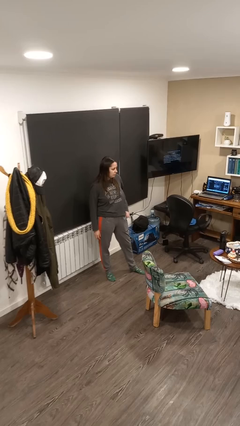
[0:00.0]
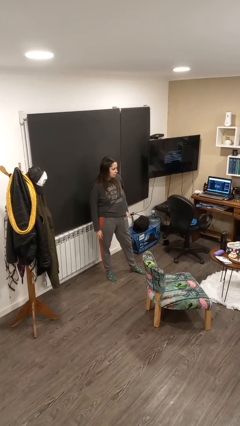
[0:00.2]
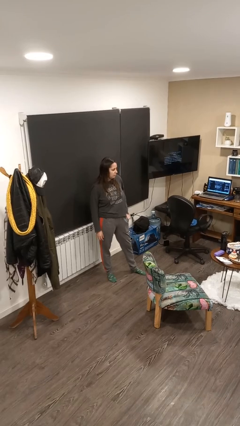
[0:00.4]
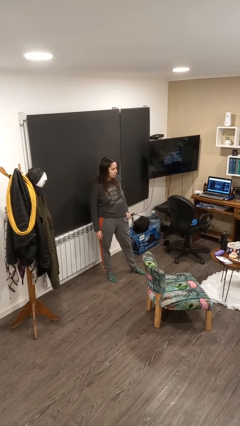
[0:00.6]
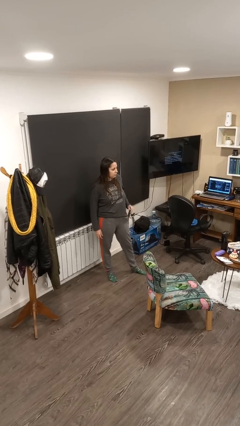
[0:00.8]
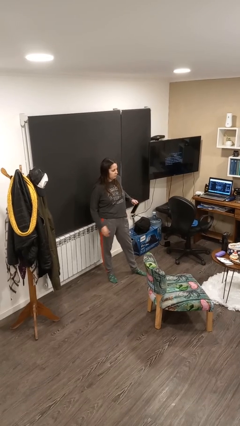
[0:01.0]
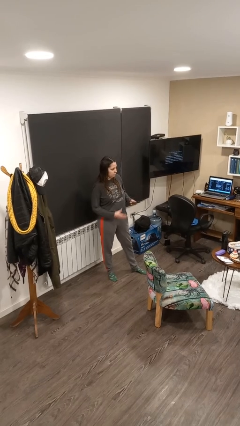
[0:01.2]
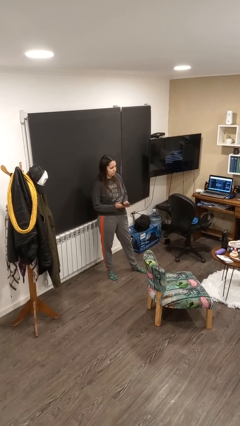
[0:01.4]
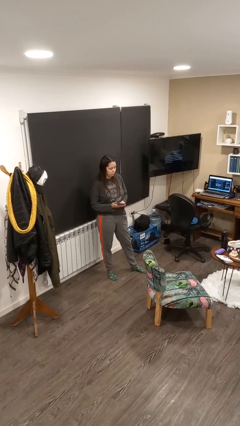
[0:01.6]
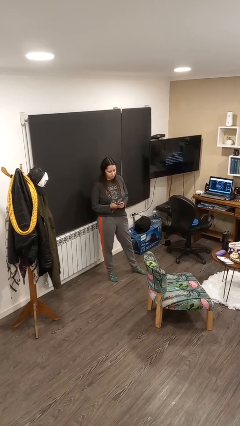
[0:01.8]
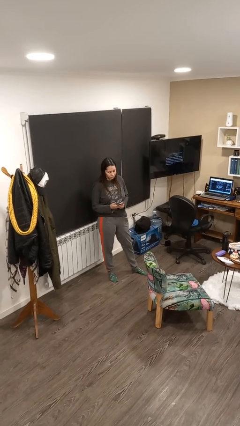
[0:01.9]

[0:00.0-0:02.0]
person takes phone from pocket

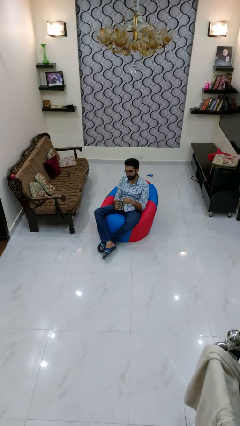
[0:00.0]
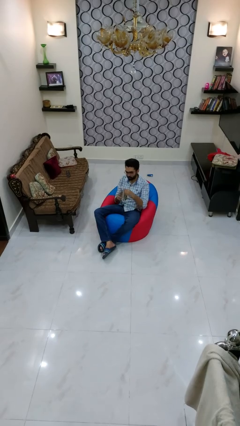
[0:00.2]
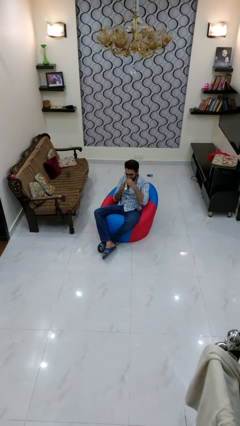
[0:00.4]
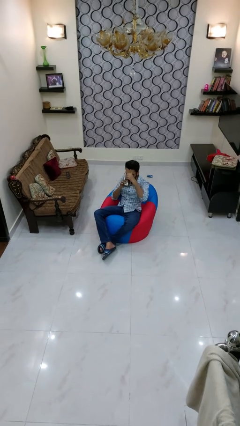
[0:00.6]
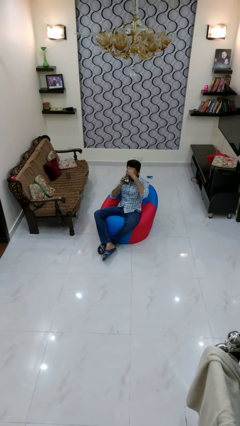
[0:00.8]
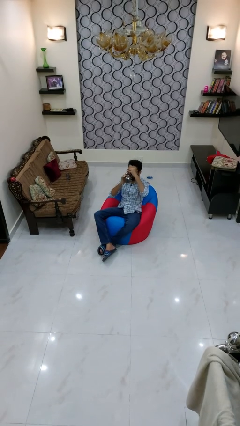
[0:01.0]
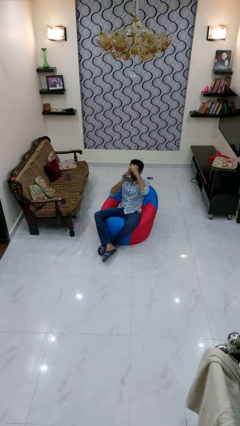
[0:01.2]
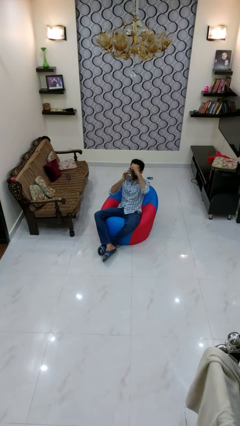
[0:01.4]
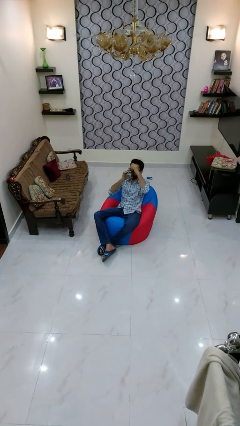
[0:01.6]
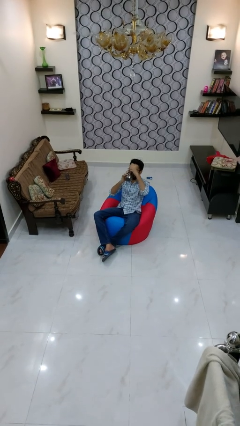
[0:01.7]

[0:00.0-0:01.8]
person drinks from mug

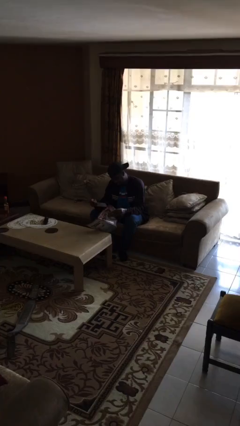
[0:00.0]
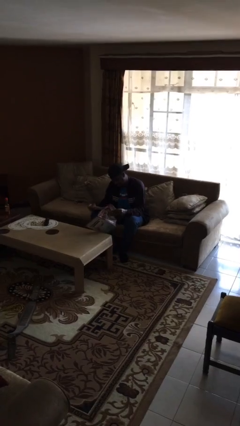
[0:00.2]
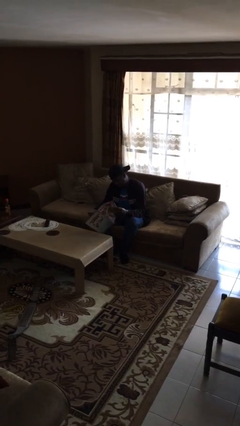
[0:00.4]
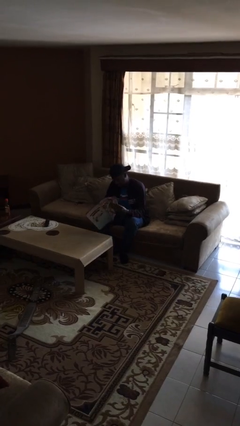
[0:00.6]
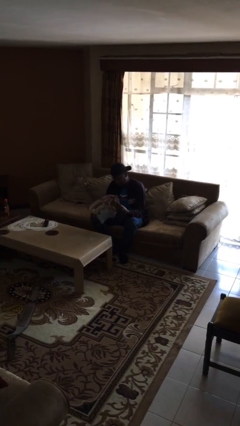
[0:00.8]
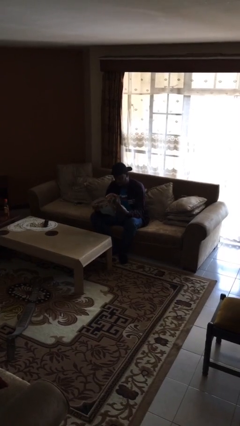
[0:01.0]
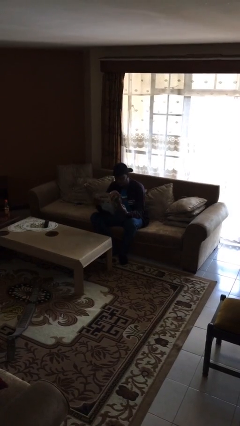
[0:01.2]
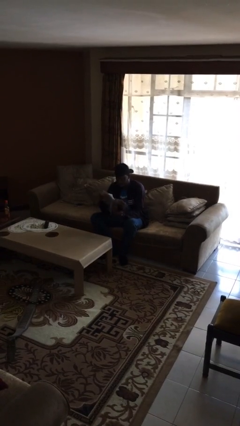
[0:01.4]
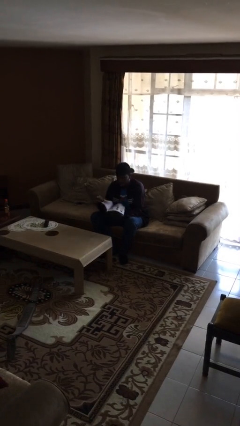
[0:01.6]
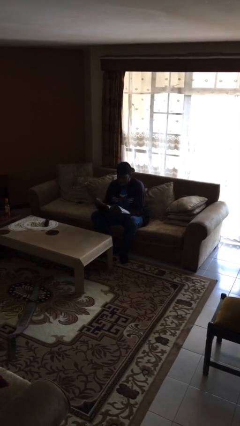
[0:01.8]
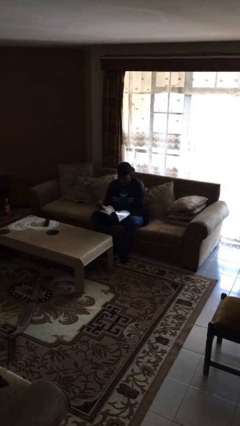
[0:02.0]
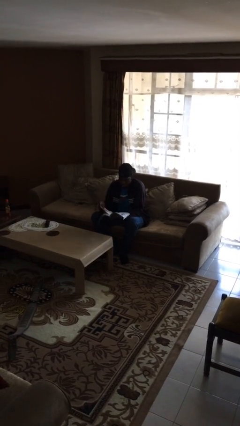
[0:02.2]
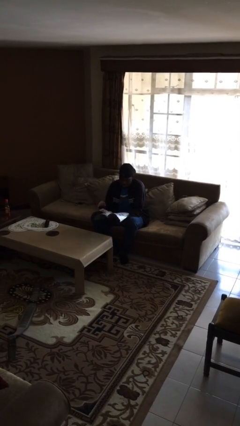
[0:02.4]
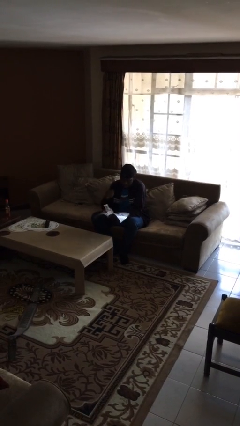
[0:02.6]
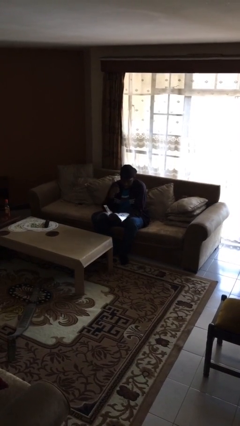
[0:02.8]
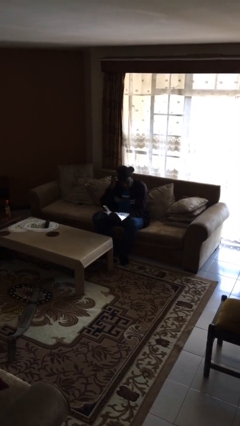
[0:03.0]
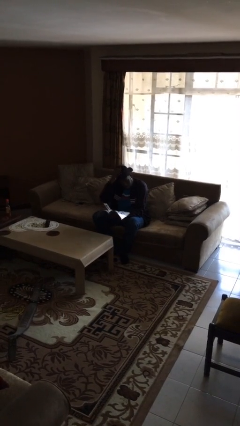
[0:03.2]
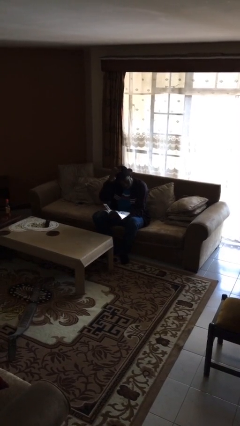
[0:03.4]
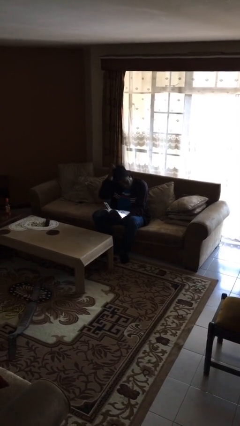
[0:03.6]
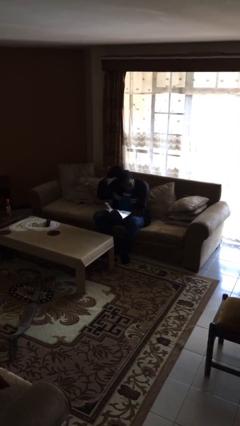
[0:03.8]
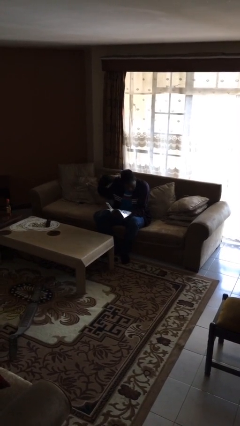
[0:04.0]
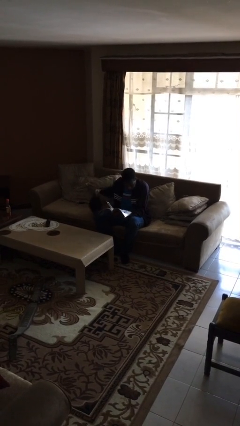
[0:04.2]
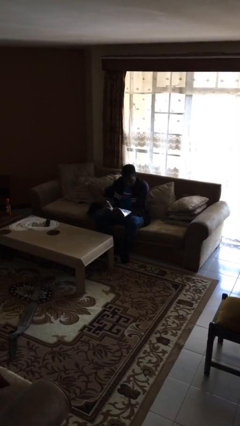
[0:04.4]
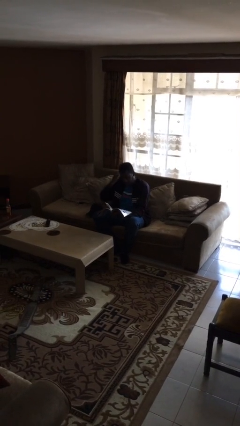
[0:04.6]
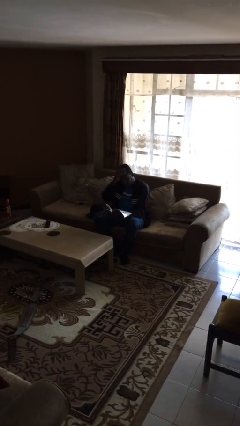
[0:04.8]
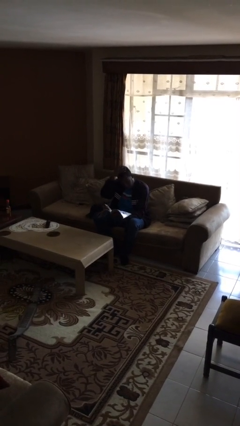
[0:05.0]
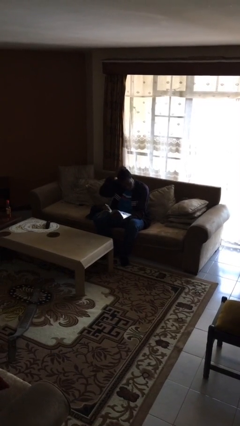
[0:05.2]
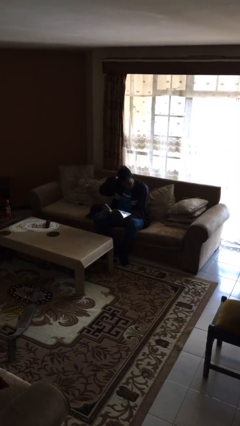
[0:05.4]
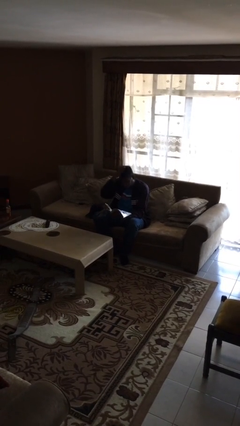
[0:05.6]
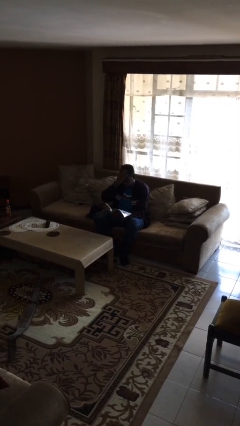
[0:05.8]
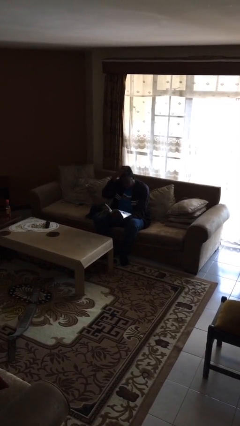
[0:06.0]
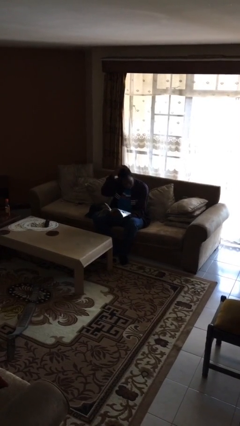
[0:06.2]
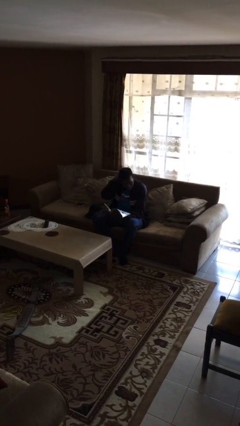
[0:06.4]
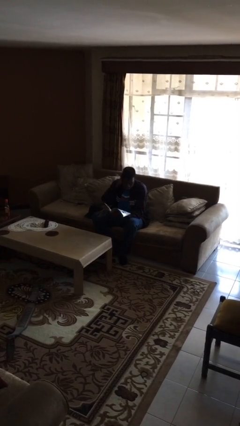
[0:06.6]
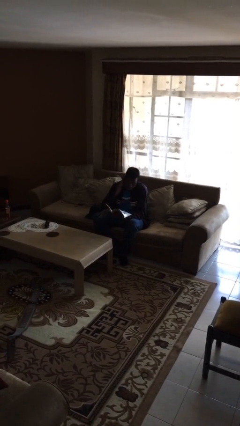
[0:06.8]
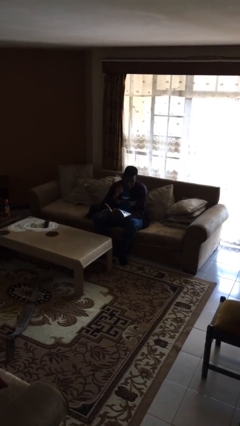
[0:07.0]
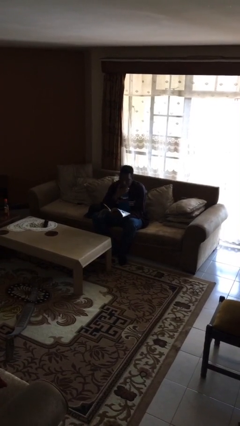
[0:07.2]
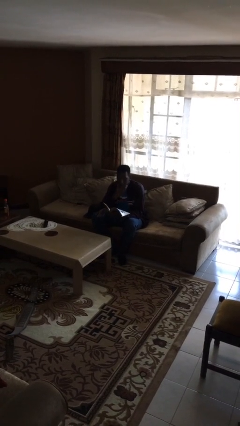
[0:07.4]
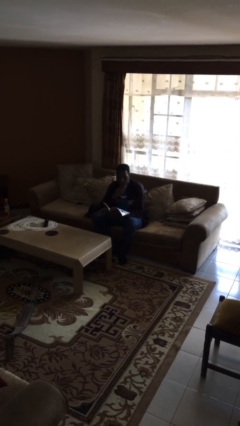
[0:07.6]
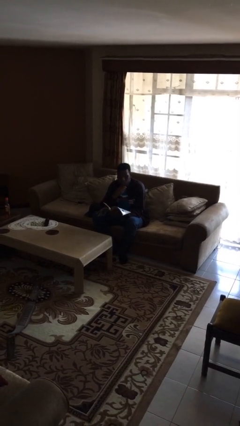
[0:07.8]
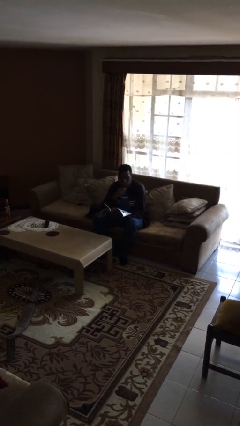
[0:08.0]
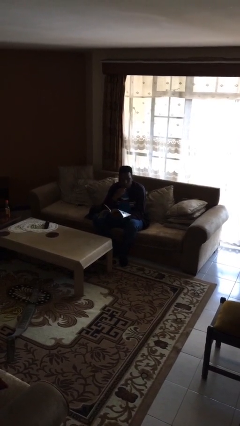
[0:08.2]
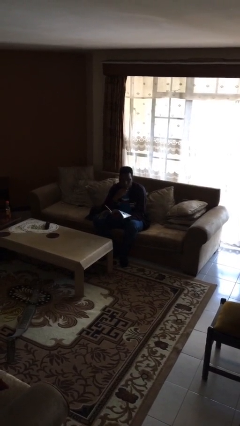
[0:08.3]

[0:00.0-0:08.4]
person reads document

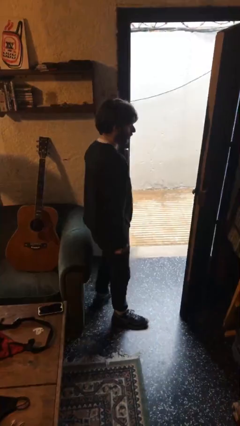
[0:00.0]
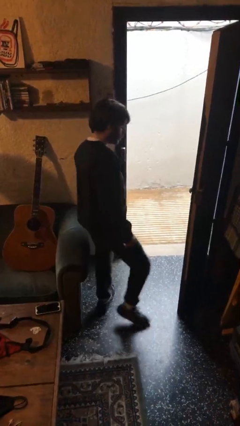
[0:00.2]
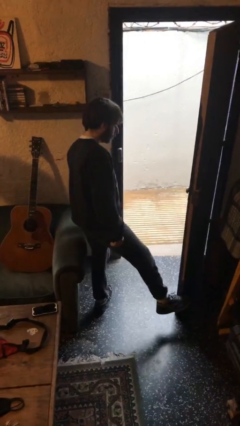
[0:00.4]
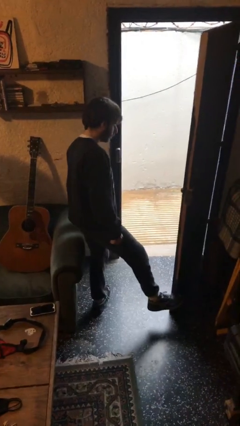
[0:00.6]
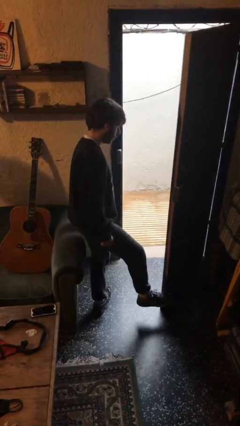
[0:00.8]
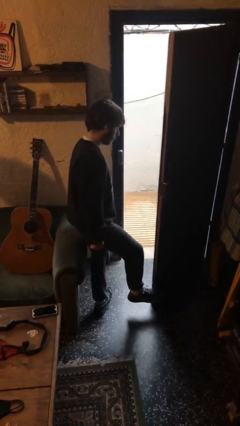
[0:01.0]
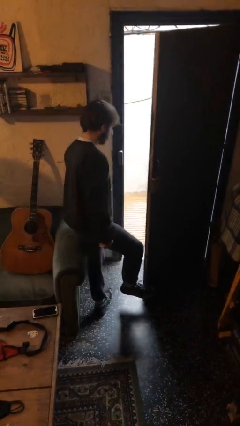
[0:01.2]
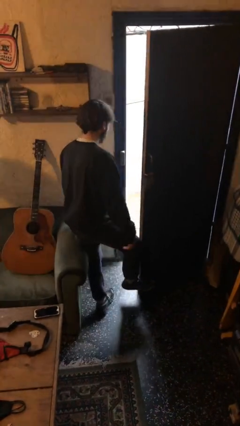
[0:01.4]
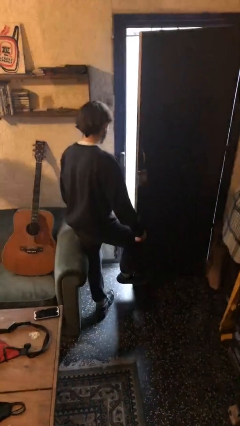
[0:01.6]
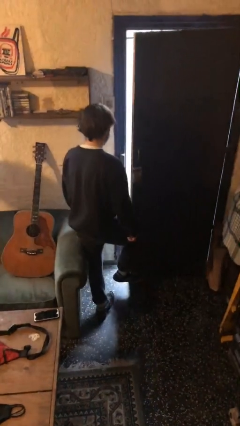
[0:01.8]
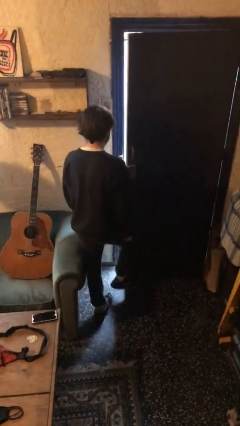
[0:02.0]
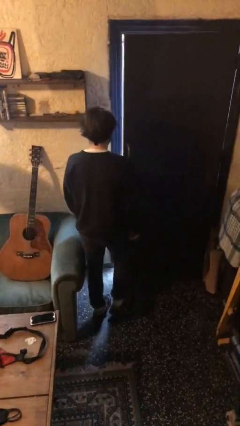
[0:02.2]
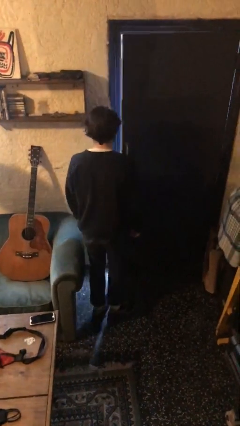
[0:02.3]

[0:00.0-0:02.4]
person closes door with foot

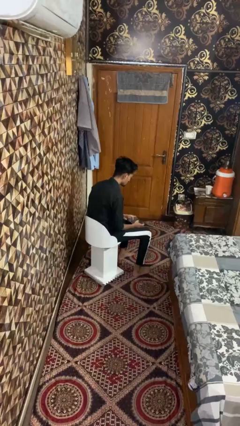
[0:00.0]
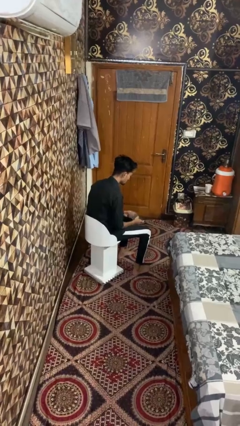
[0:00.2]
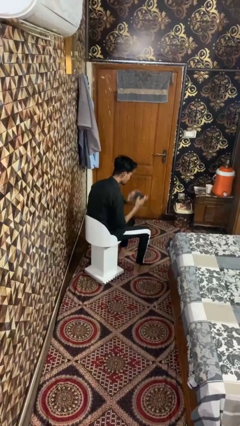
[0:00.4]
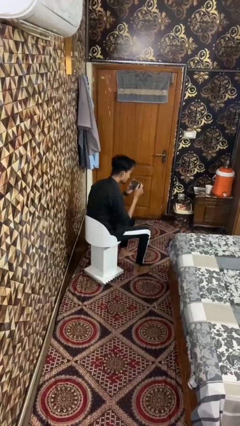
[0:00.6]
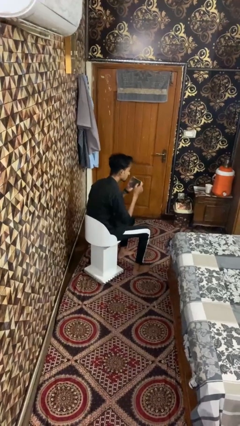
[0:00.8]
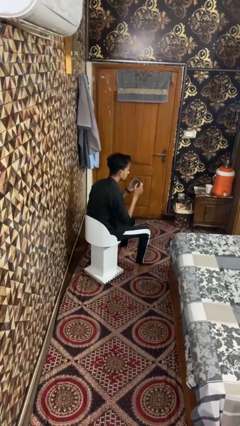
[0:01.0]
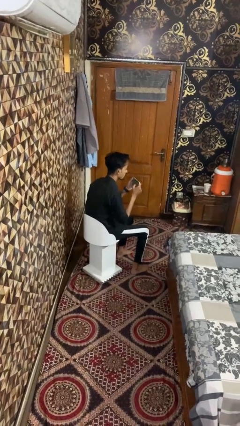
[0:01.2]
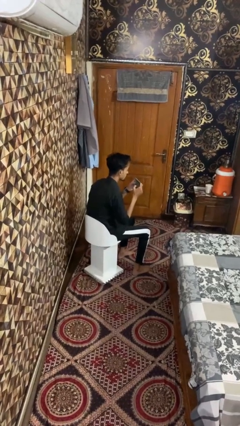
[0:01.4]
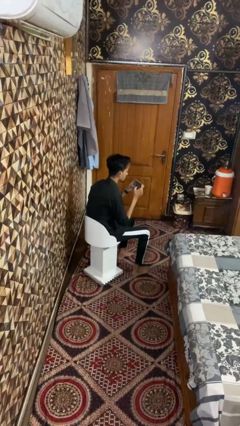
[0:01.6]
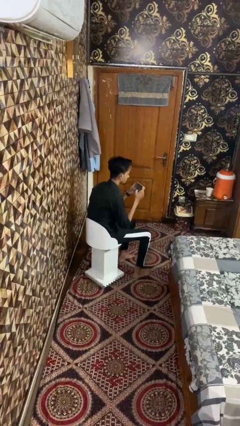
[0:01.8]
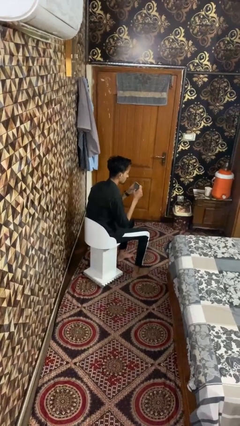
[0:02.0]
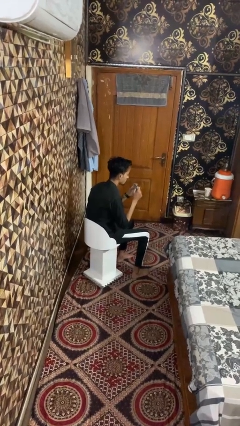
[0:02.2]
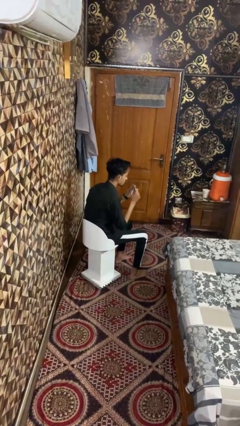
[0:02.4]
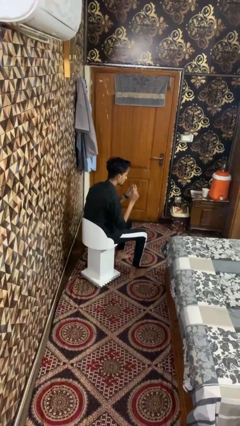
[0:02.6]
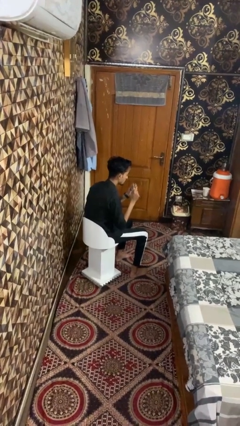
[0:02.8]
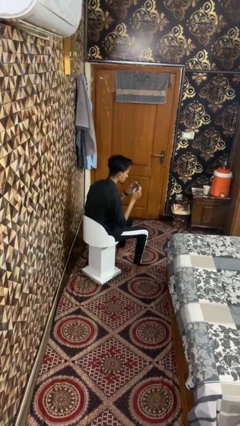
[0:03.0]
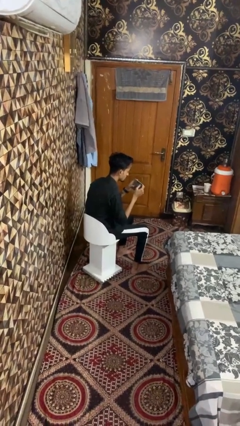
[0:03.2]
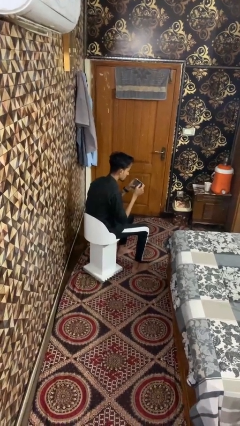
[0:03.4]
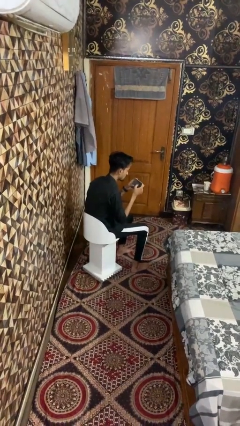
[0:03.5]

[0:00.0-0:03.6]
person taps object with finger
